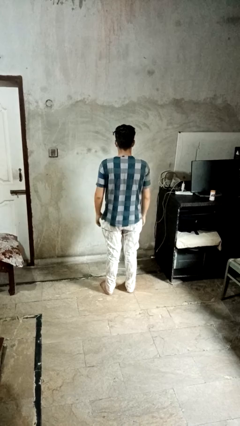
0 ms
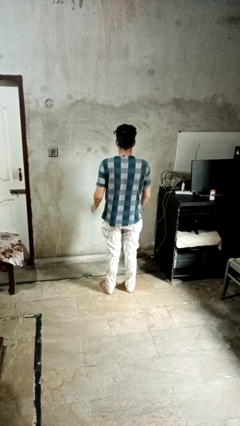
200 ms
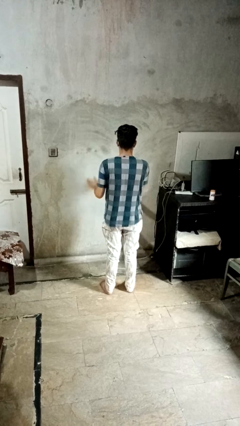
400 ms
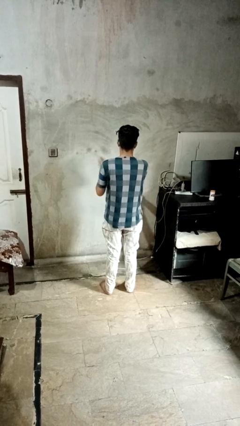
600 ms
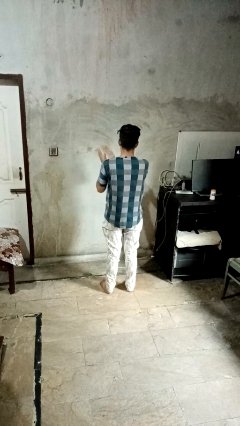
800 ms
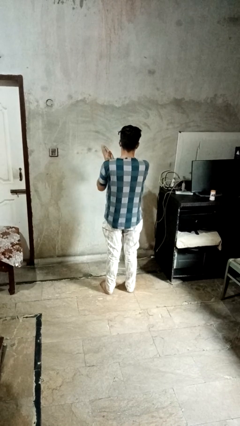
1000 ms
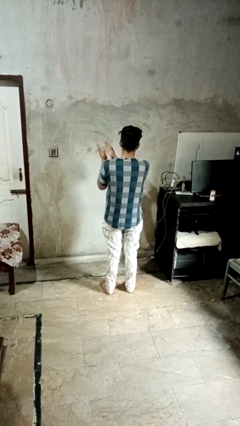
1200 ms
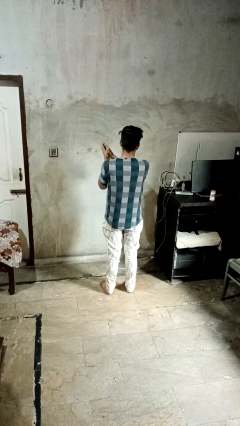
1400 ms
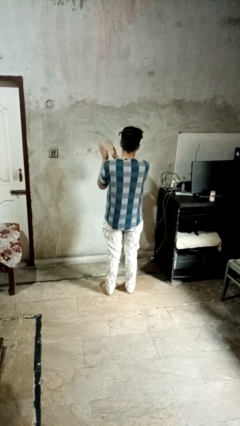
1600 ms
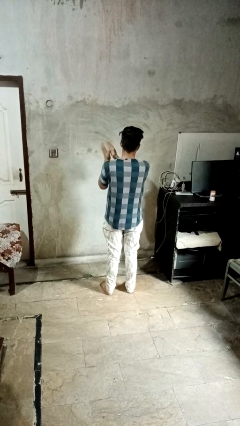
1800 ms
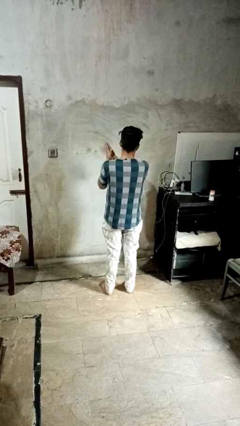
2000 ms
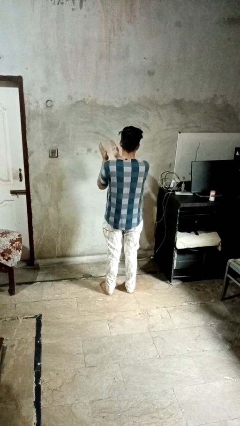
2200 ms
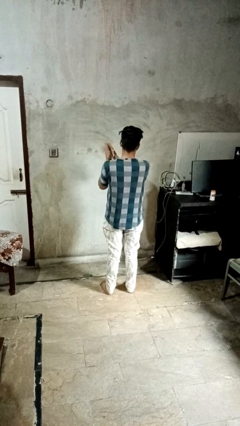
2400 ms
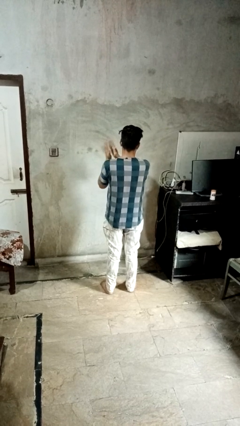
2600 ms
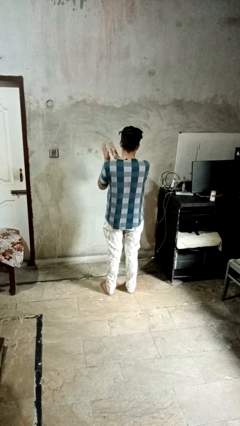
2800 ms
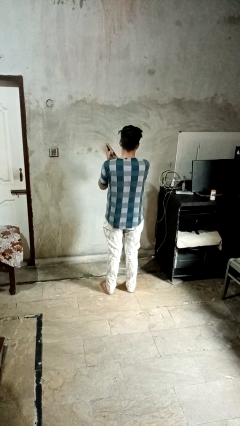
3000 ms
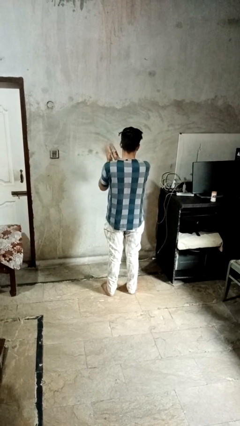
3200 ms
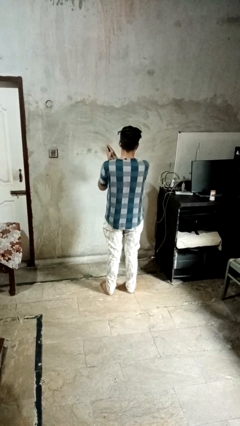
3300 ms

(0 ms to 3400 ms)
person claps hands

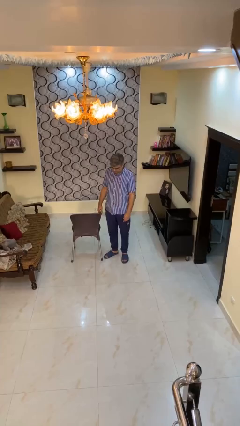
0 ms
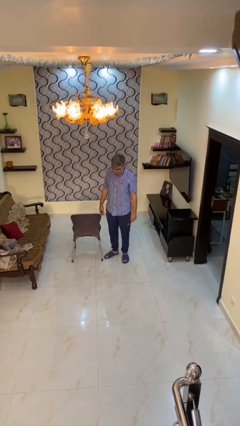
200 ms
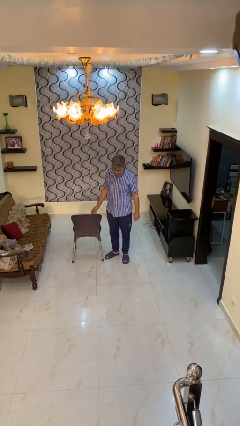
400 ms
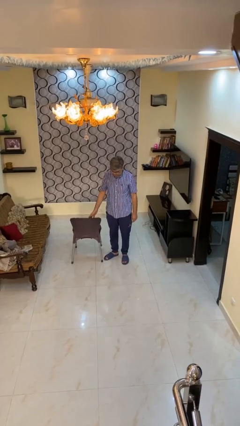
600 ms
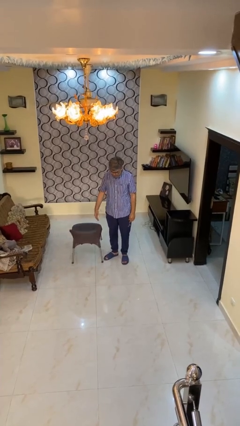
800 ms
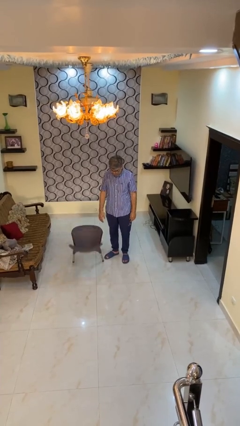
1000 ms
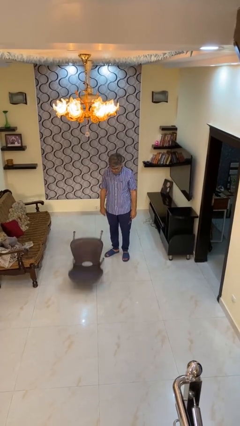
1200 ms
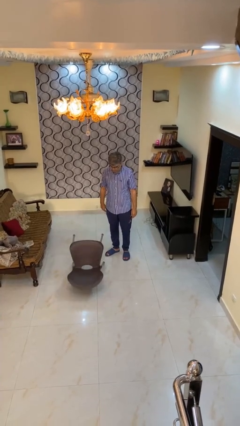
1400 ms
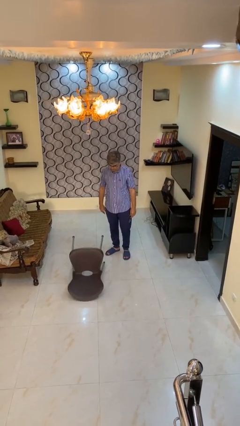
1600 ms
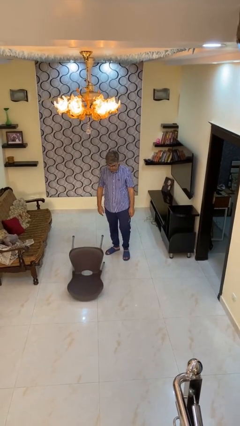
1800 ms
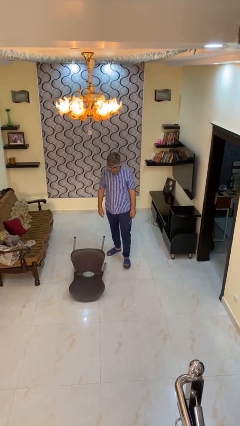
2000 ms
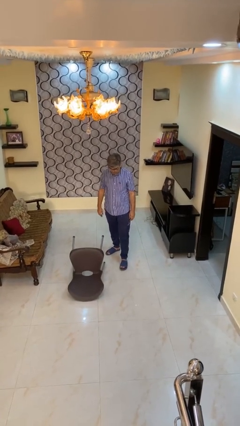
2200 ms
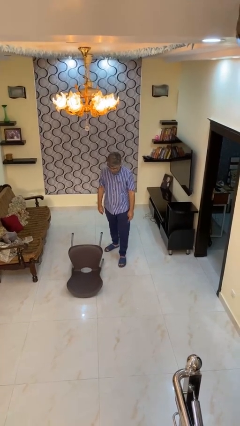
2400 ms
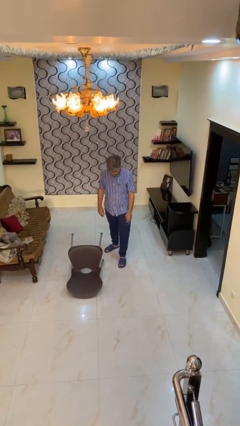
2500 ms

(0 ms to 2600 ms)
person knocks over furniture

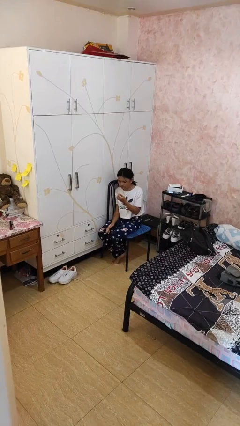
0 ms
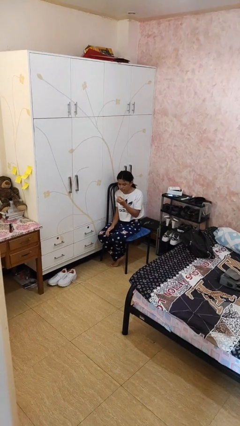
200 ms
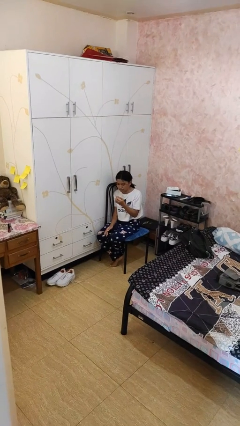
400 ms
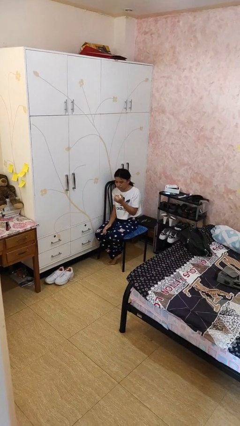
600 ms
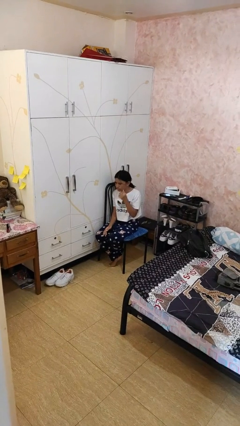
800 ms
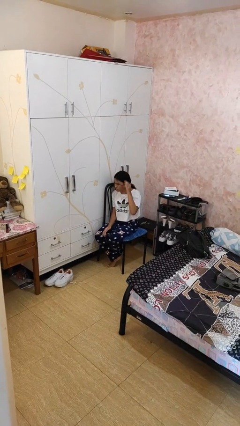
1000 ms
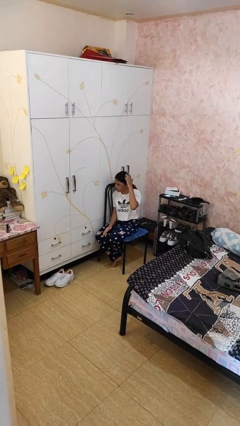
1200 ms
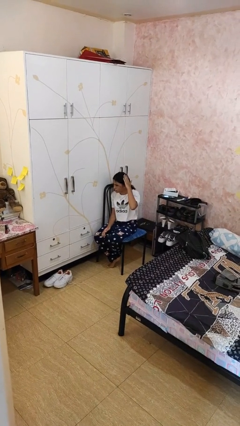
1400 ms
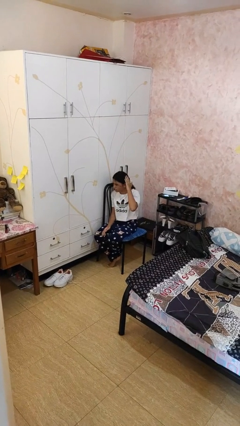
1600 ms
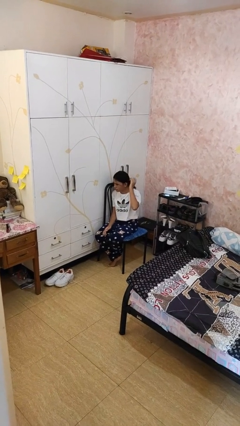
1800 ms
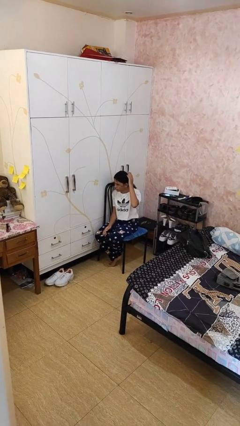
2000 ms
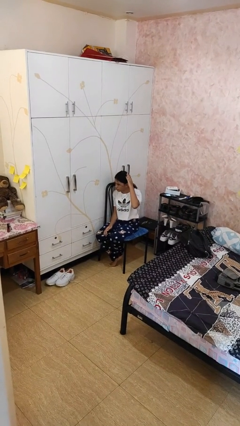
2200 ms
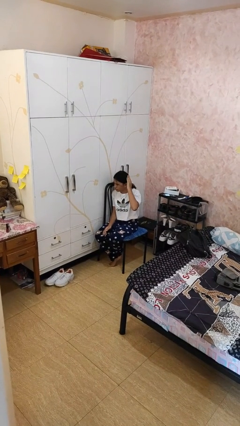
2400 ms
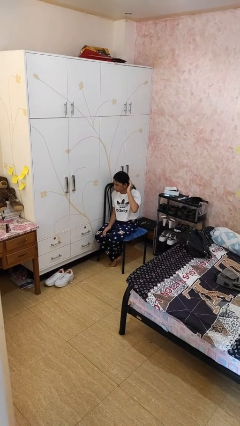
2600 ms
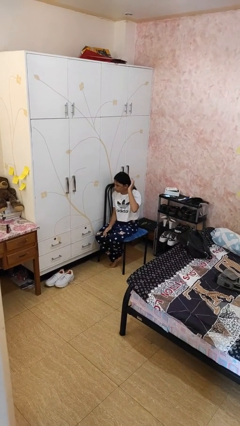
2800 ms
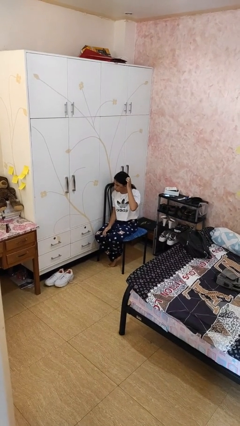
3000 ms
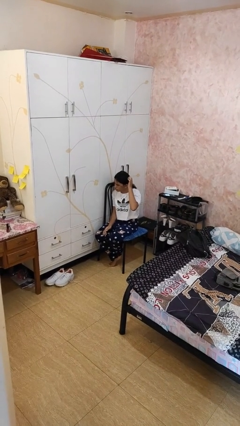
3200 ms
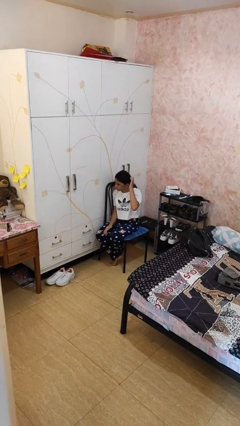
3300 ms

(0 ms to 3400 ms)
person pats head

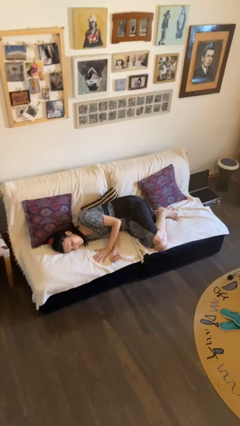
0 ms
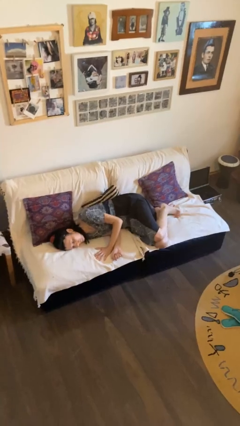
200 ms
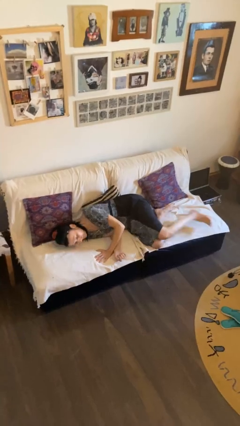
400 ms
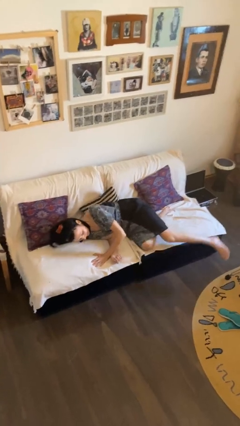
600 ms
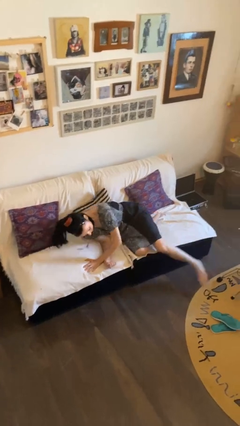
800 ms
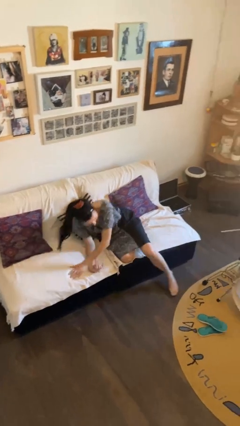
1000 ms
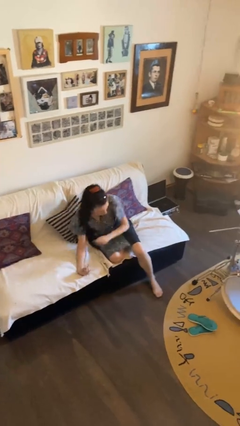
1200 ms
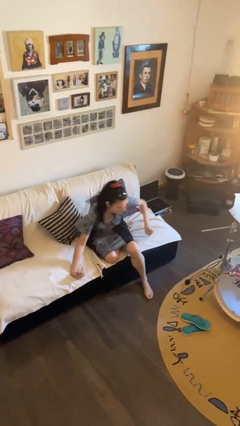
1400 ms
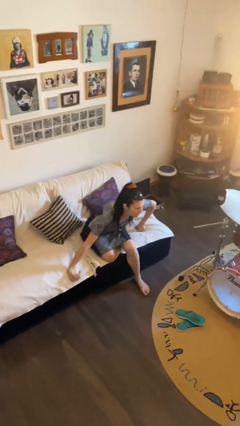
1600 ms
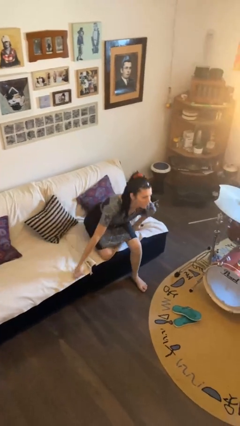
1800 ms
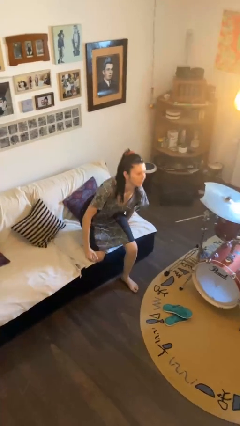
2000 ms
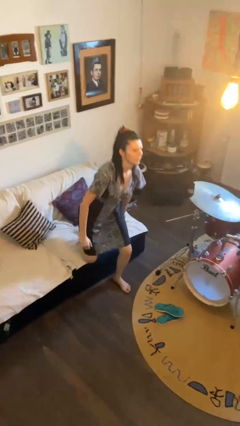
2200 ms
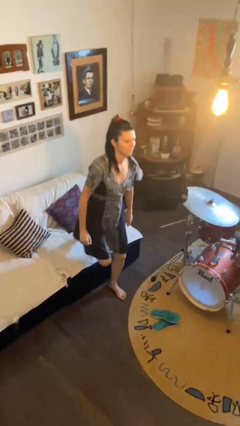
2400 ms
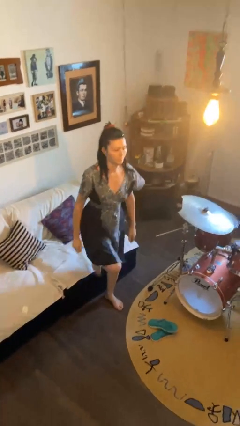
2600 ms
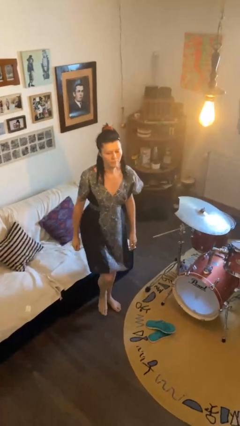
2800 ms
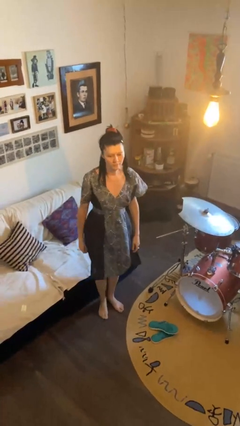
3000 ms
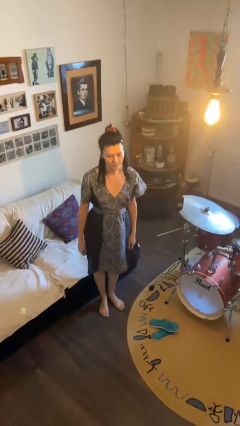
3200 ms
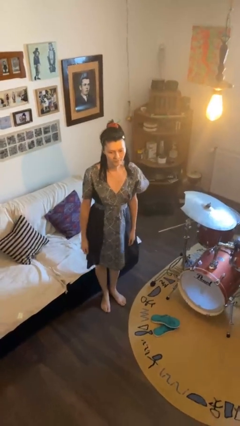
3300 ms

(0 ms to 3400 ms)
person stands up

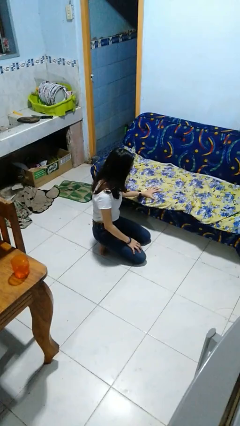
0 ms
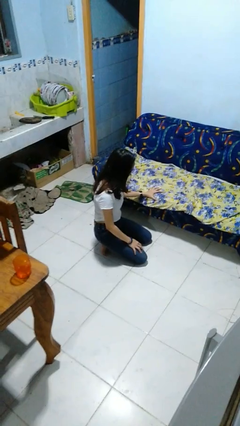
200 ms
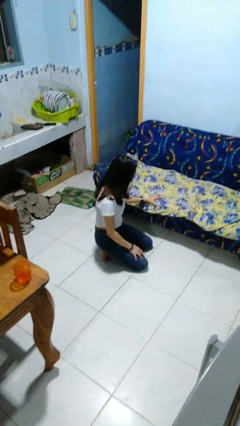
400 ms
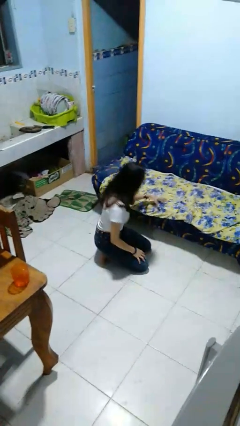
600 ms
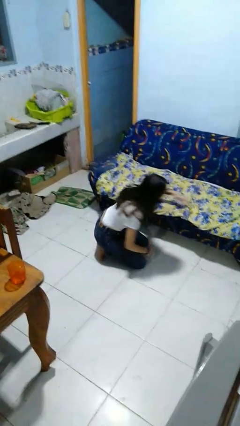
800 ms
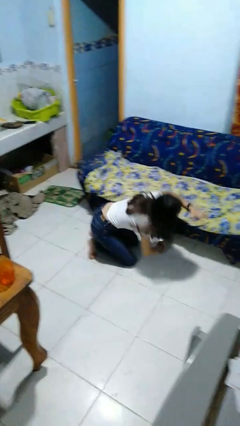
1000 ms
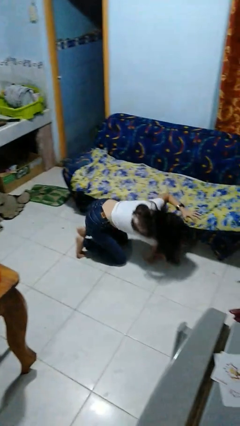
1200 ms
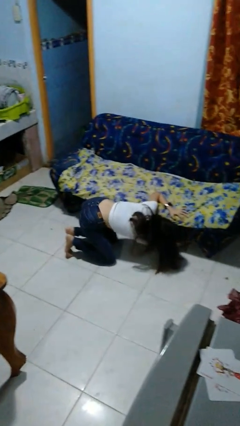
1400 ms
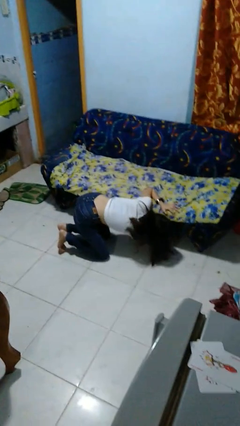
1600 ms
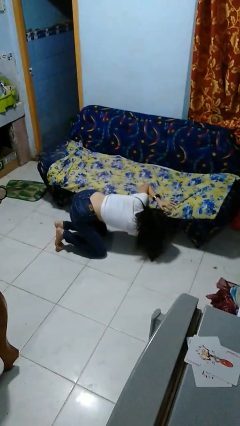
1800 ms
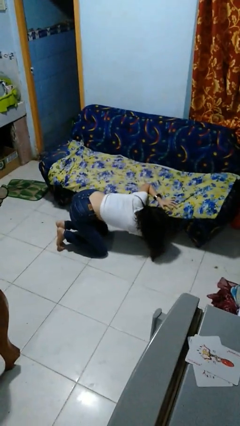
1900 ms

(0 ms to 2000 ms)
person searches under couch

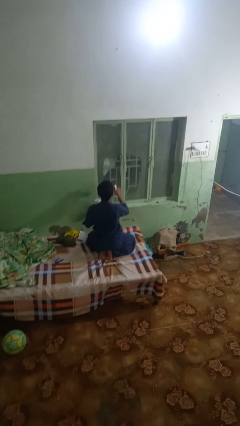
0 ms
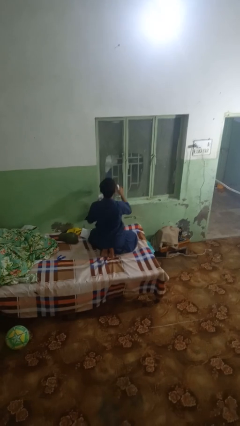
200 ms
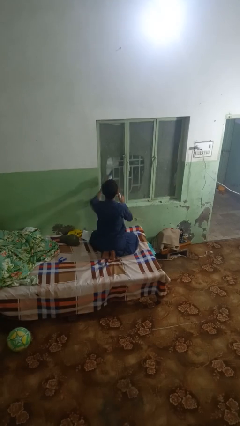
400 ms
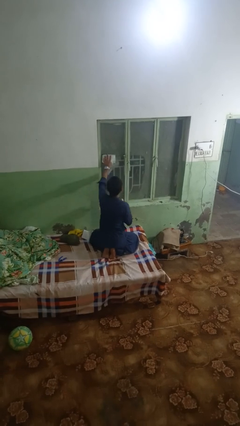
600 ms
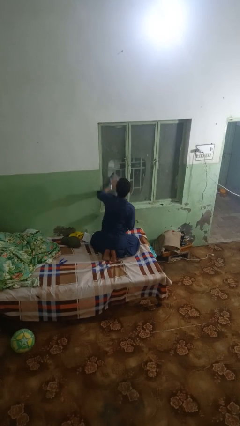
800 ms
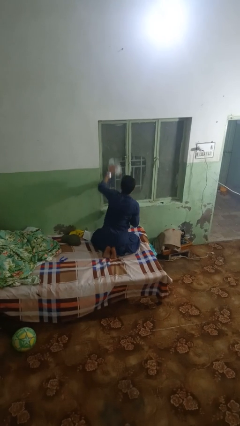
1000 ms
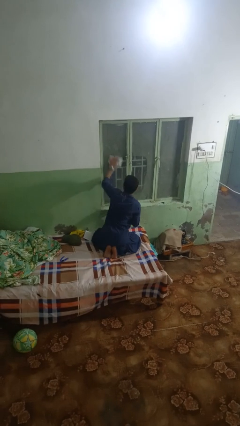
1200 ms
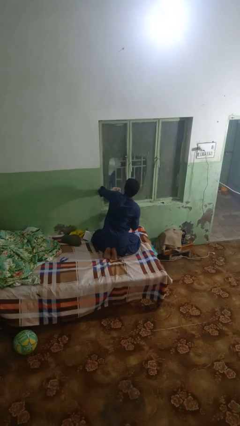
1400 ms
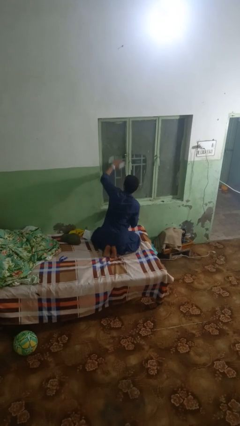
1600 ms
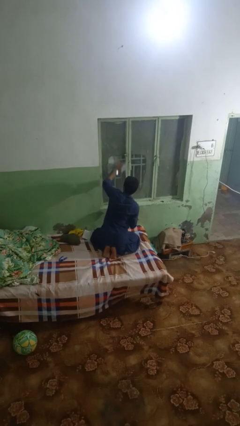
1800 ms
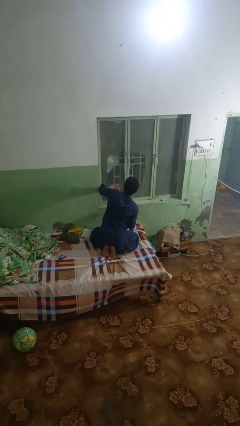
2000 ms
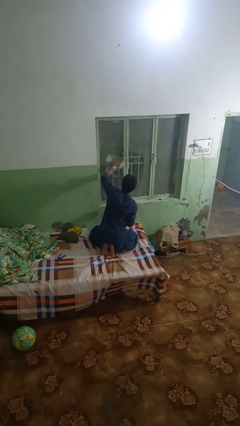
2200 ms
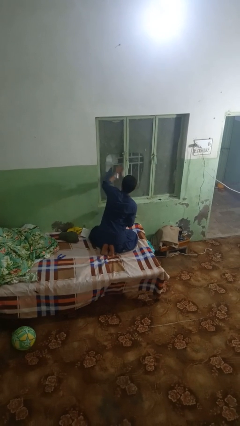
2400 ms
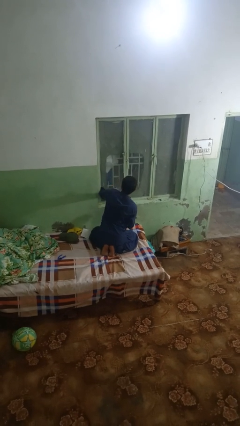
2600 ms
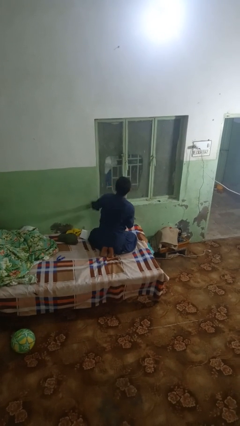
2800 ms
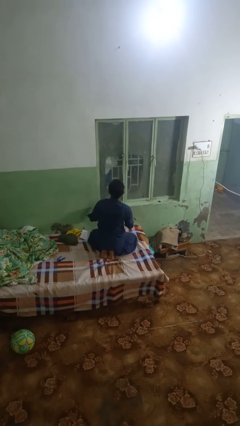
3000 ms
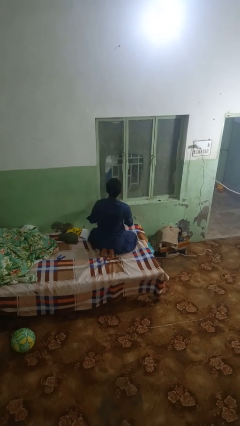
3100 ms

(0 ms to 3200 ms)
person washes window
